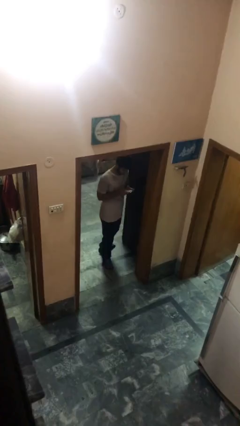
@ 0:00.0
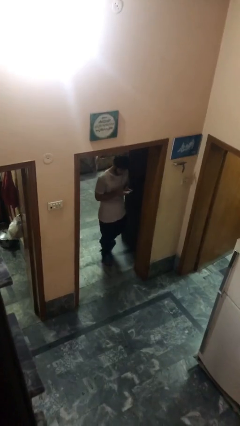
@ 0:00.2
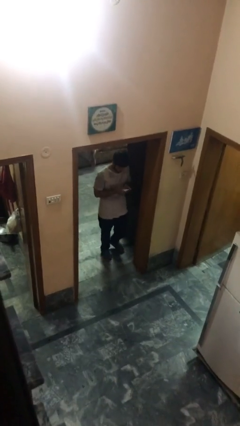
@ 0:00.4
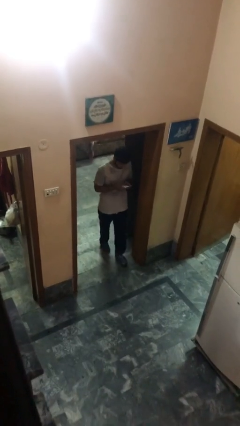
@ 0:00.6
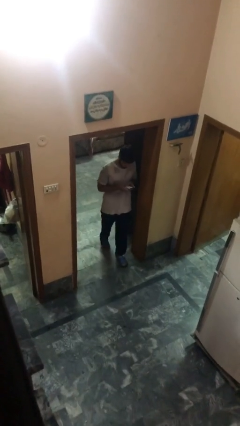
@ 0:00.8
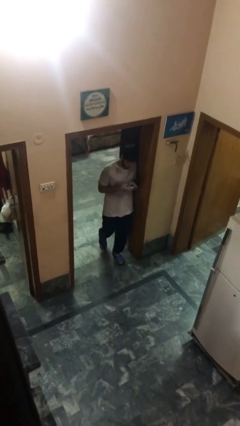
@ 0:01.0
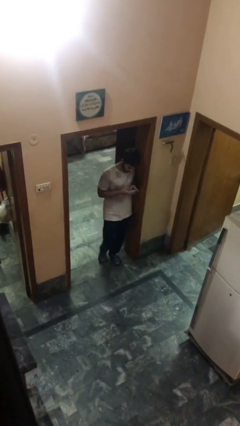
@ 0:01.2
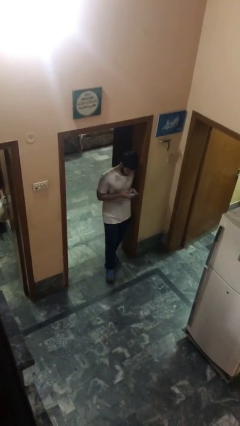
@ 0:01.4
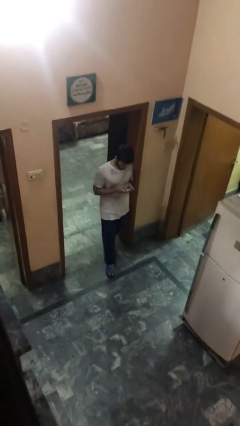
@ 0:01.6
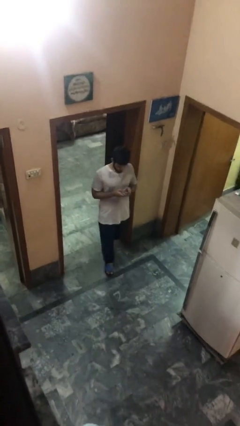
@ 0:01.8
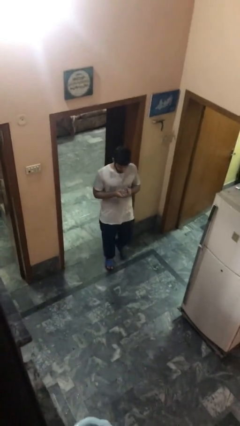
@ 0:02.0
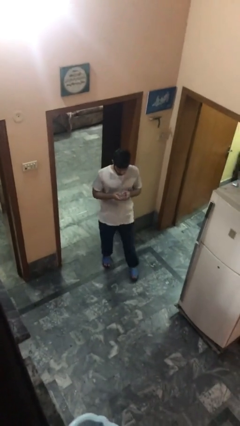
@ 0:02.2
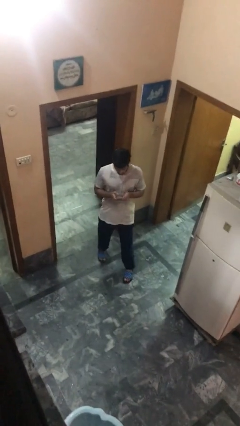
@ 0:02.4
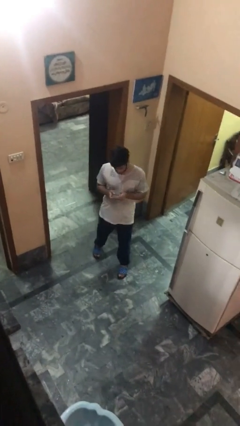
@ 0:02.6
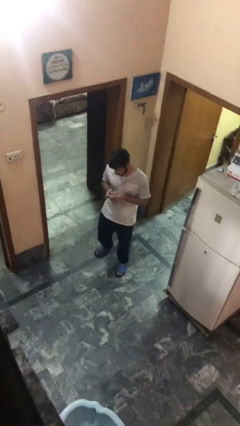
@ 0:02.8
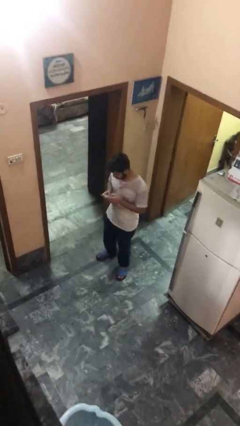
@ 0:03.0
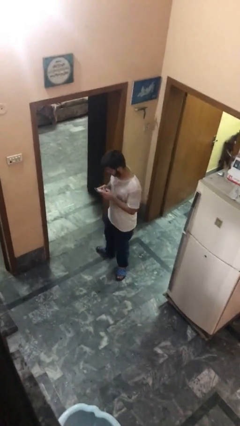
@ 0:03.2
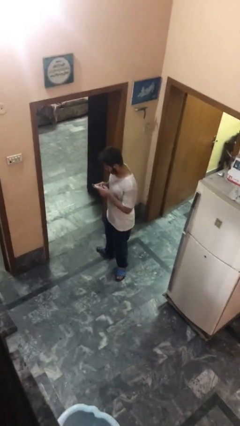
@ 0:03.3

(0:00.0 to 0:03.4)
person enters scene through structure

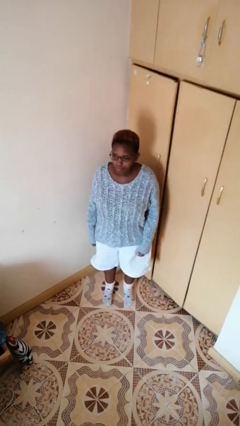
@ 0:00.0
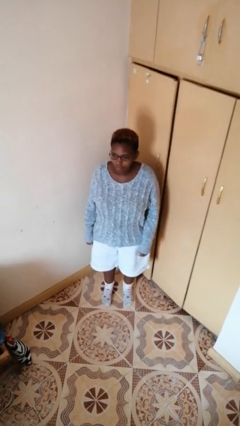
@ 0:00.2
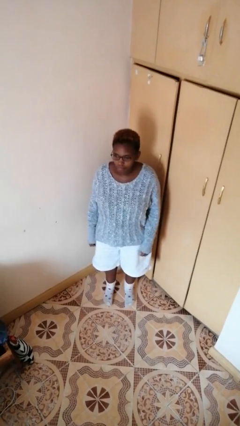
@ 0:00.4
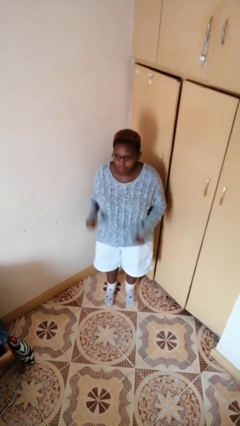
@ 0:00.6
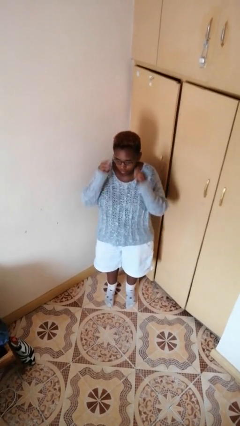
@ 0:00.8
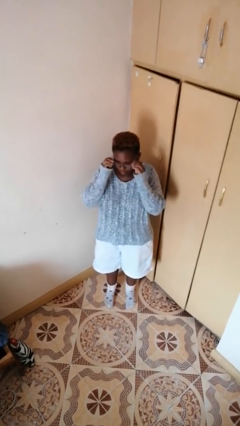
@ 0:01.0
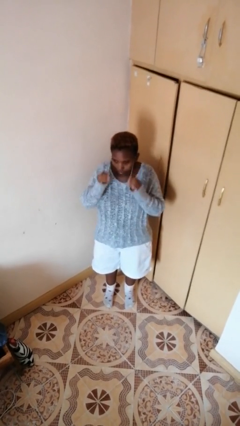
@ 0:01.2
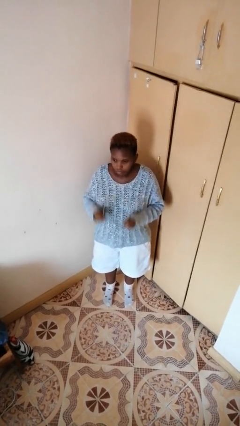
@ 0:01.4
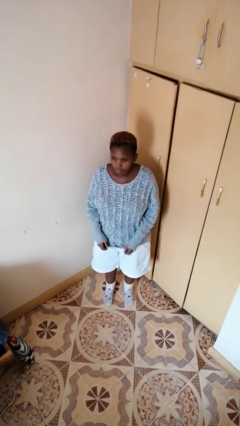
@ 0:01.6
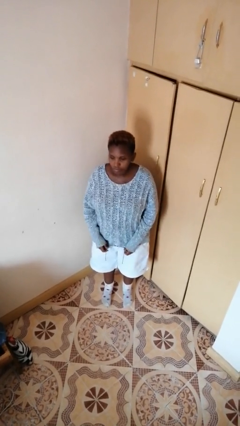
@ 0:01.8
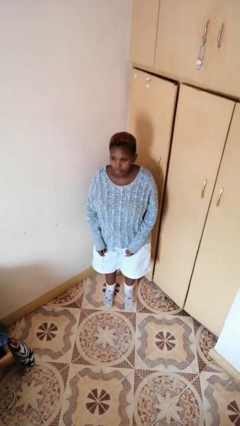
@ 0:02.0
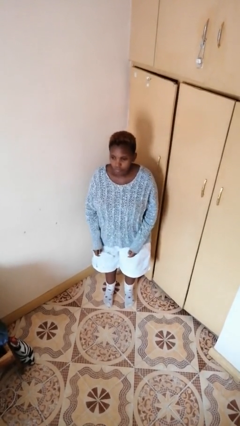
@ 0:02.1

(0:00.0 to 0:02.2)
person takes off glasses

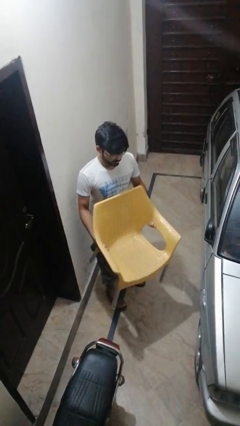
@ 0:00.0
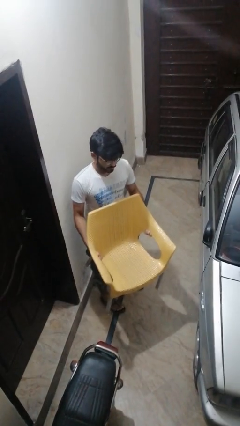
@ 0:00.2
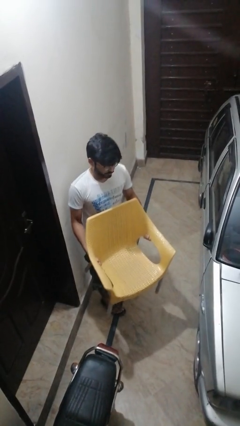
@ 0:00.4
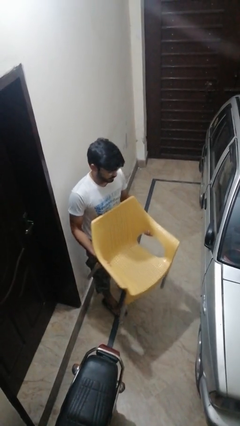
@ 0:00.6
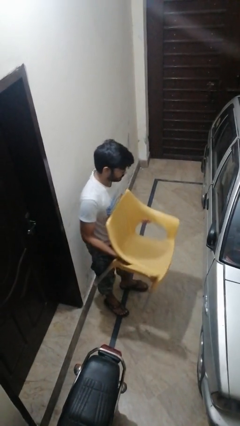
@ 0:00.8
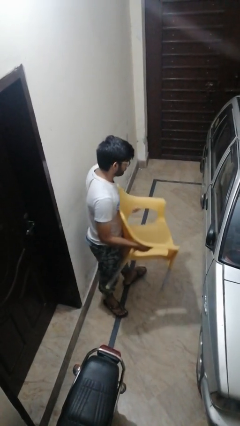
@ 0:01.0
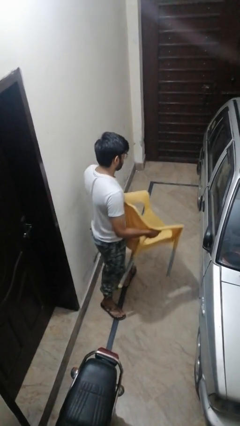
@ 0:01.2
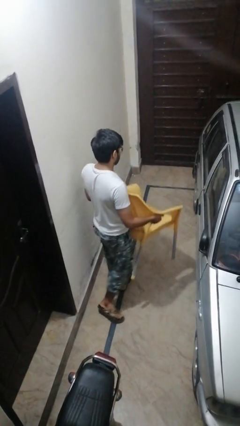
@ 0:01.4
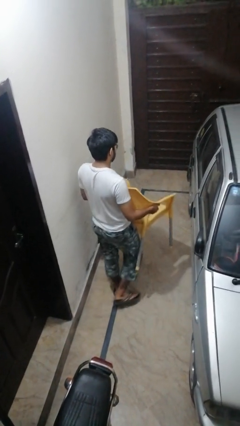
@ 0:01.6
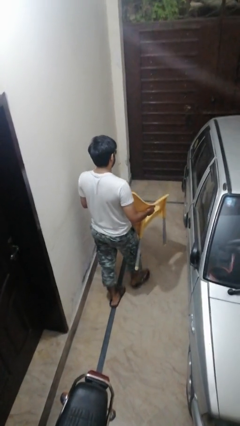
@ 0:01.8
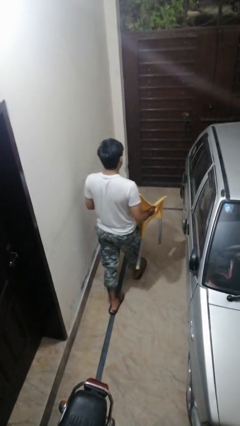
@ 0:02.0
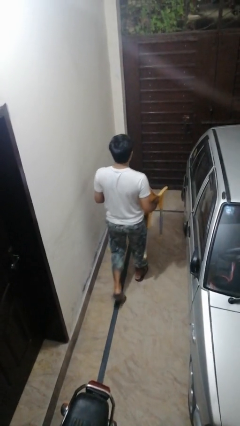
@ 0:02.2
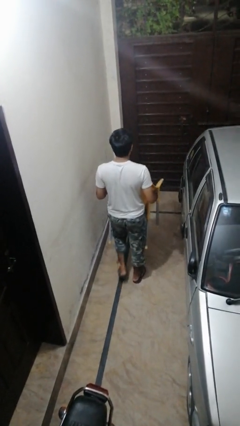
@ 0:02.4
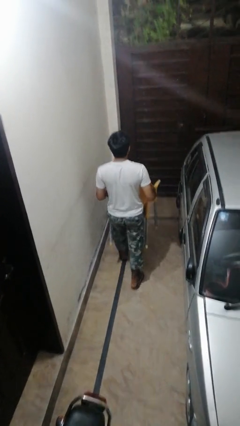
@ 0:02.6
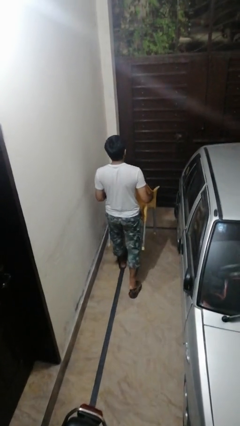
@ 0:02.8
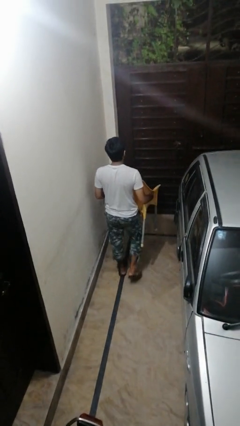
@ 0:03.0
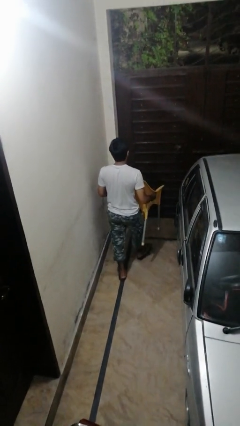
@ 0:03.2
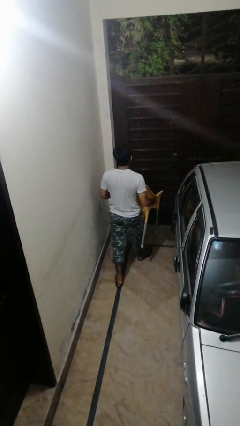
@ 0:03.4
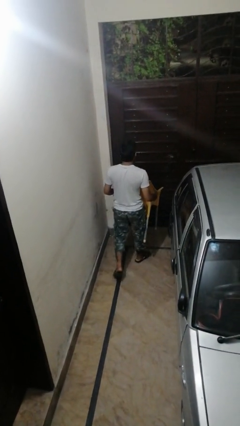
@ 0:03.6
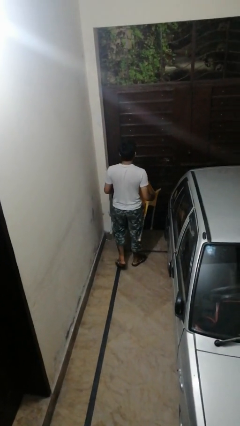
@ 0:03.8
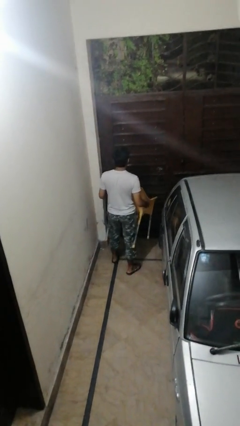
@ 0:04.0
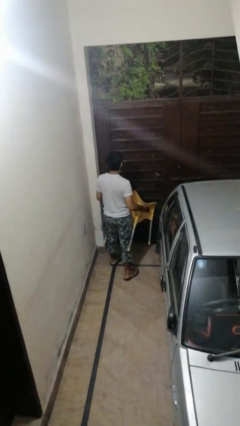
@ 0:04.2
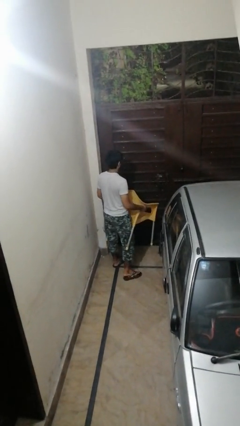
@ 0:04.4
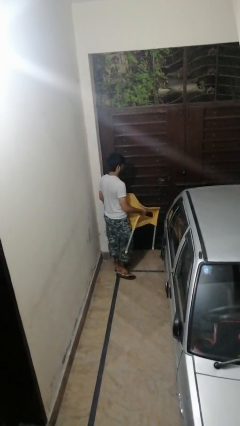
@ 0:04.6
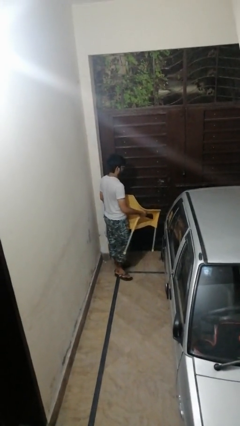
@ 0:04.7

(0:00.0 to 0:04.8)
person carries furniture

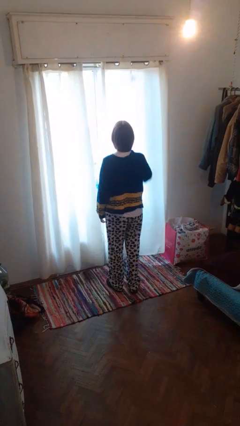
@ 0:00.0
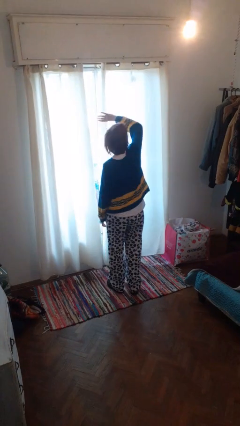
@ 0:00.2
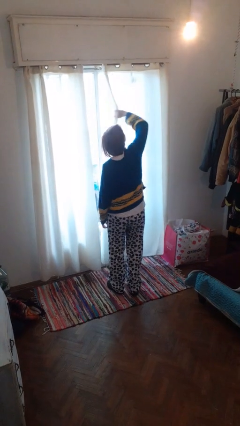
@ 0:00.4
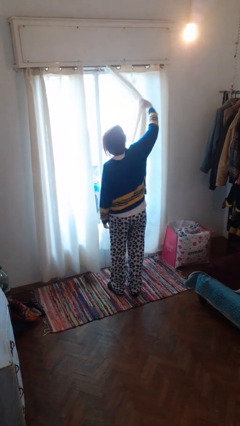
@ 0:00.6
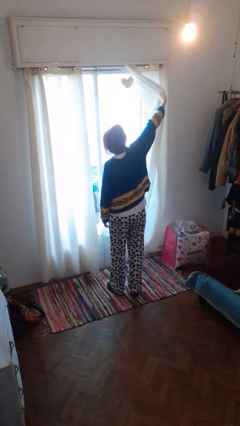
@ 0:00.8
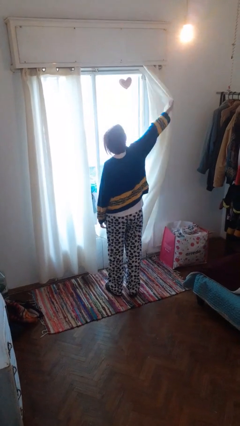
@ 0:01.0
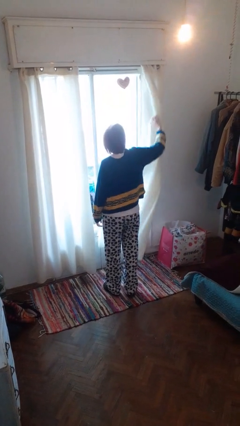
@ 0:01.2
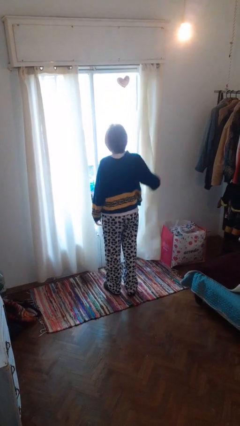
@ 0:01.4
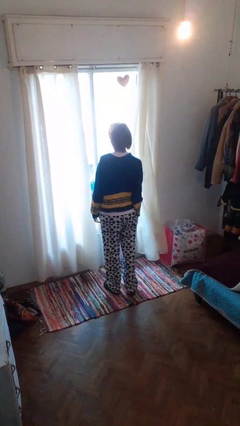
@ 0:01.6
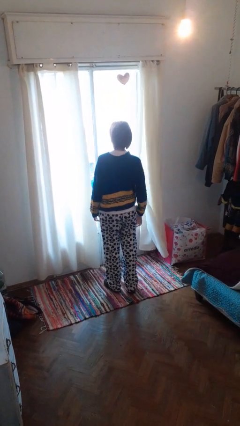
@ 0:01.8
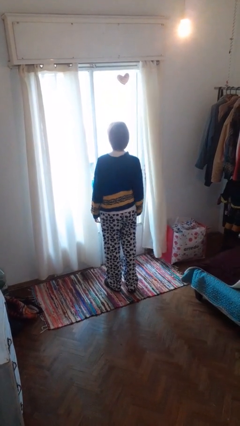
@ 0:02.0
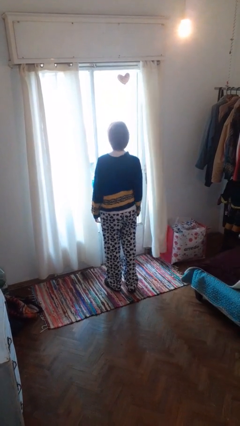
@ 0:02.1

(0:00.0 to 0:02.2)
person opens curtains

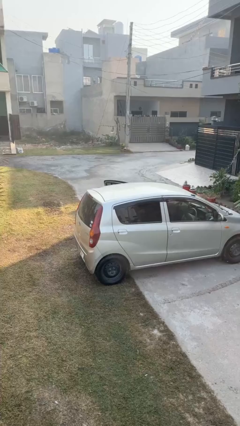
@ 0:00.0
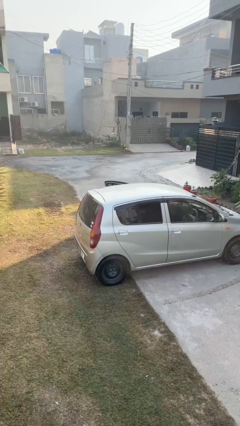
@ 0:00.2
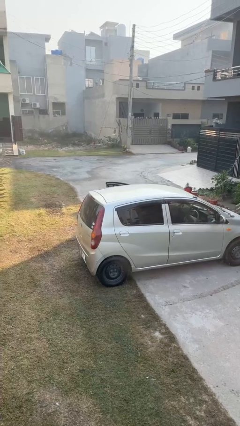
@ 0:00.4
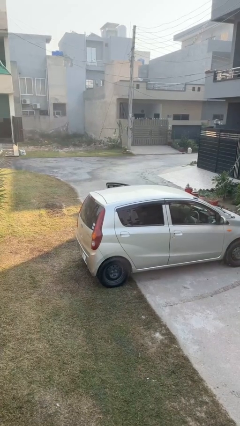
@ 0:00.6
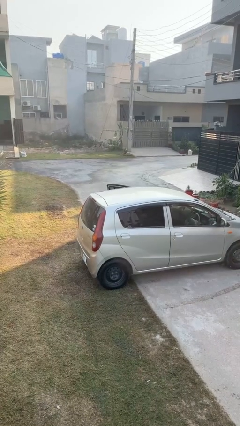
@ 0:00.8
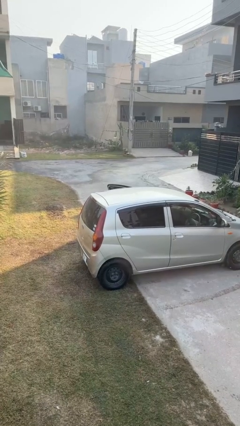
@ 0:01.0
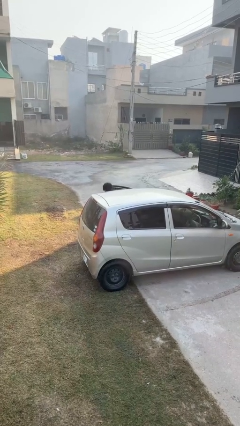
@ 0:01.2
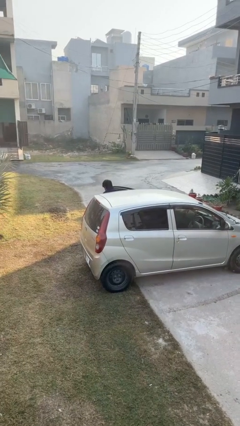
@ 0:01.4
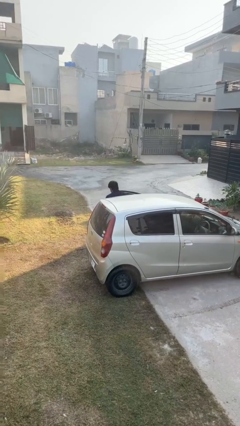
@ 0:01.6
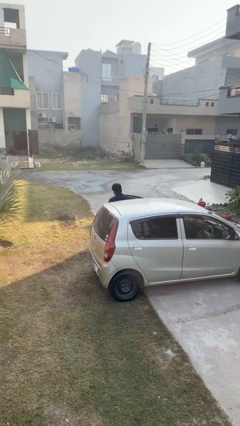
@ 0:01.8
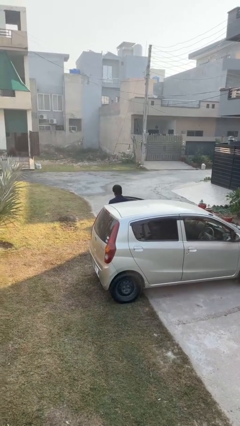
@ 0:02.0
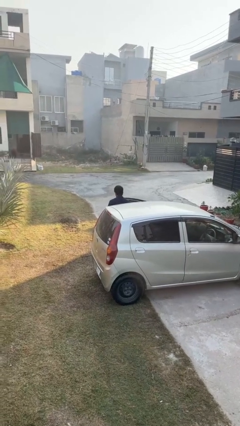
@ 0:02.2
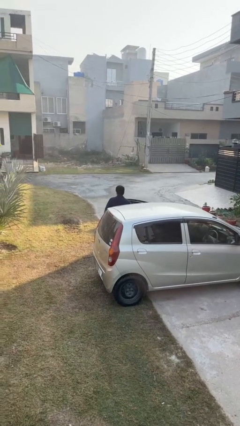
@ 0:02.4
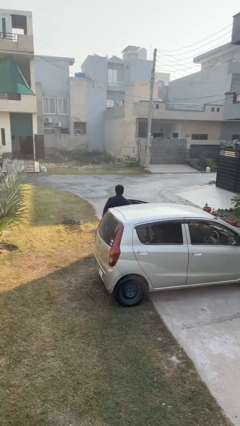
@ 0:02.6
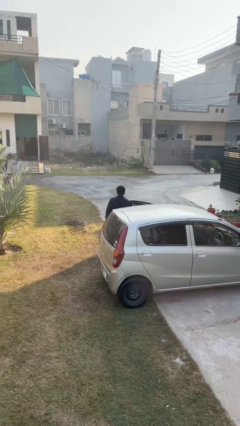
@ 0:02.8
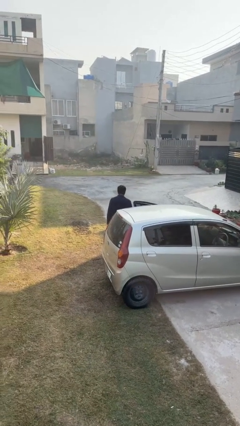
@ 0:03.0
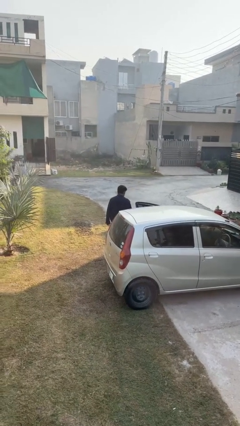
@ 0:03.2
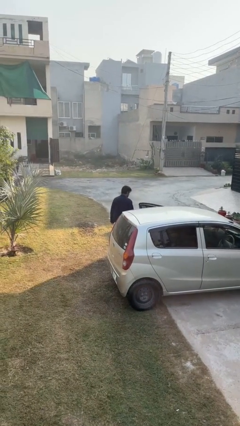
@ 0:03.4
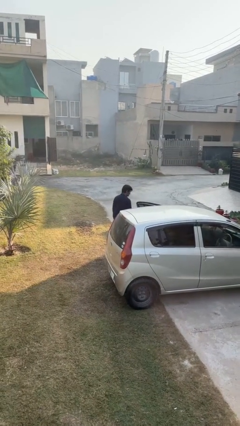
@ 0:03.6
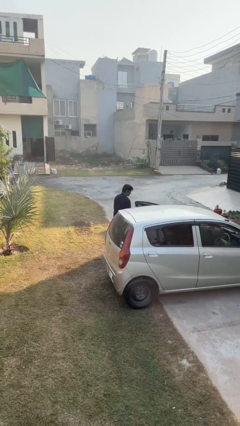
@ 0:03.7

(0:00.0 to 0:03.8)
person exits car

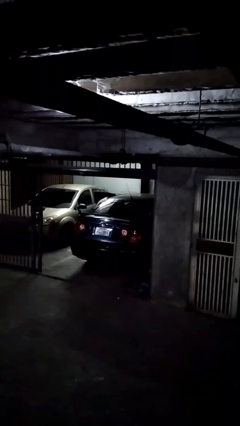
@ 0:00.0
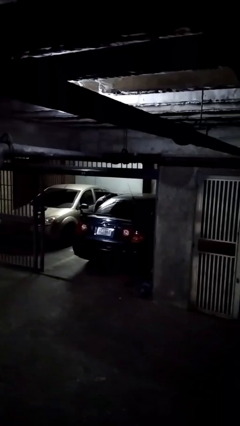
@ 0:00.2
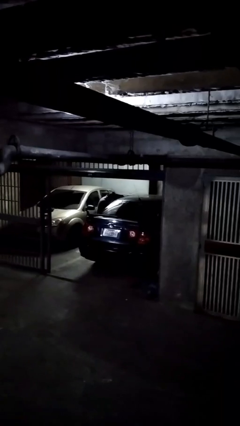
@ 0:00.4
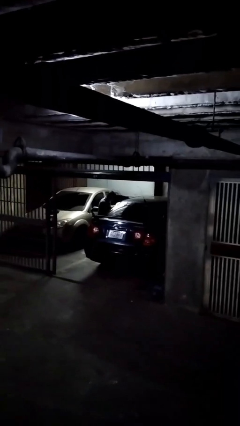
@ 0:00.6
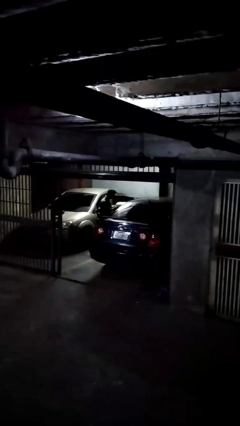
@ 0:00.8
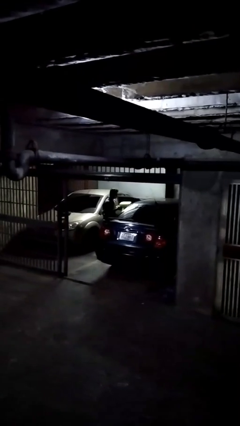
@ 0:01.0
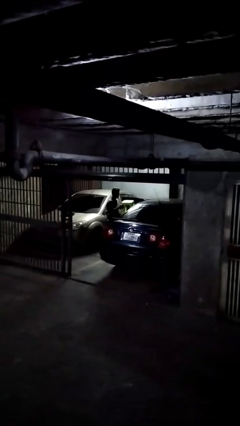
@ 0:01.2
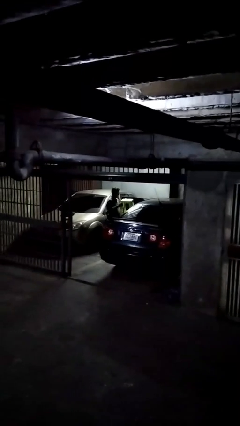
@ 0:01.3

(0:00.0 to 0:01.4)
person unloads car
